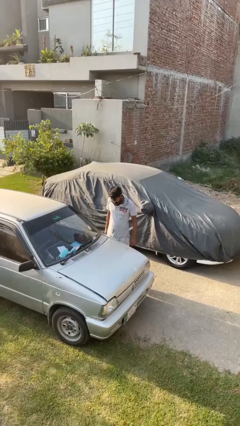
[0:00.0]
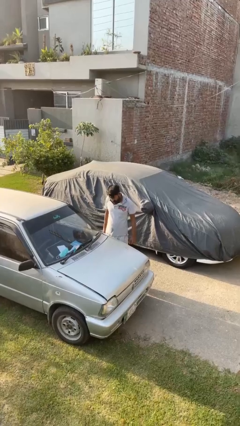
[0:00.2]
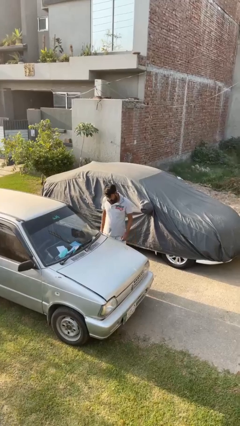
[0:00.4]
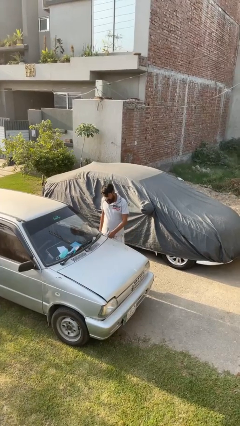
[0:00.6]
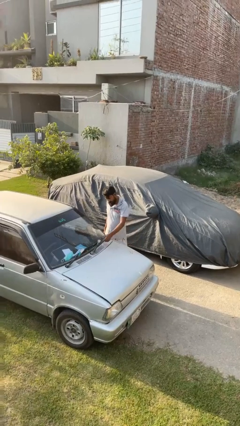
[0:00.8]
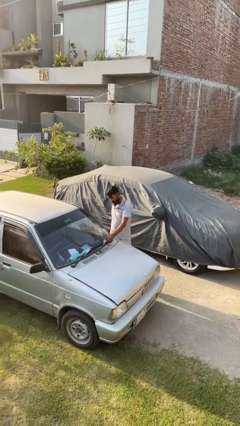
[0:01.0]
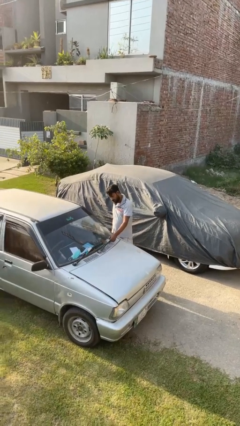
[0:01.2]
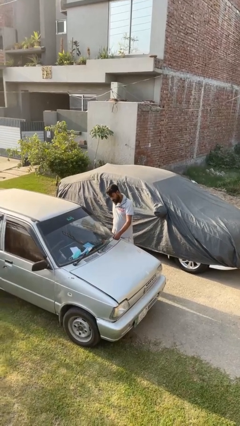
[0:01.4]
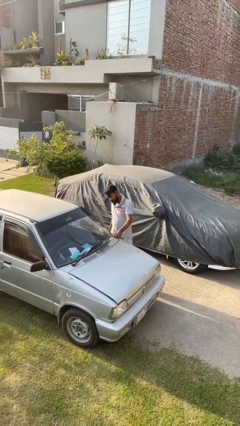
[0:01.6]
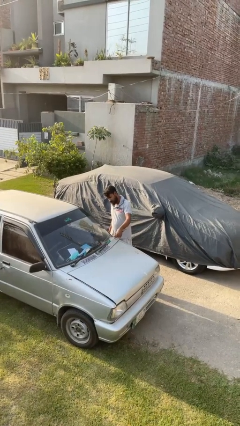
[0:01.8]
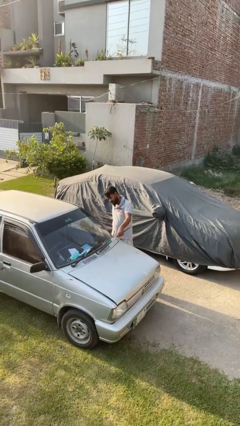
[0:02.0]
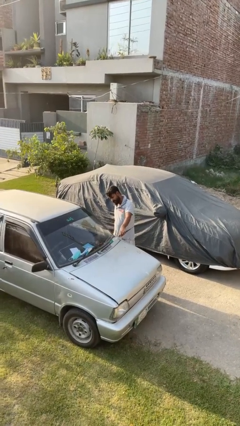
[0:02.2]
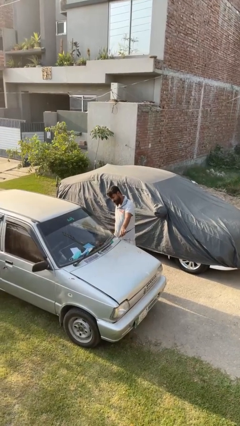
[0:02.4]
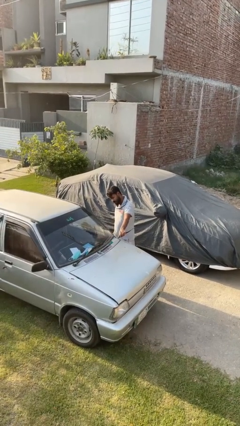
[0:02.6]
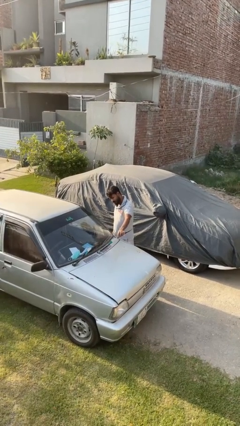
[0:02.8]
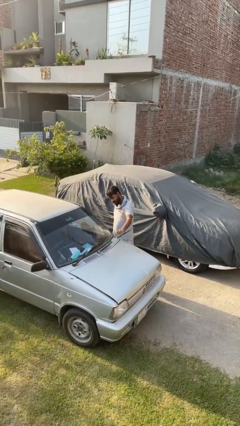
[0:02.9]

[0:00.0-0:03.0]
person flips up car wipers

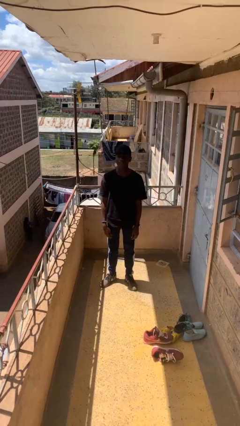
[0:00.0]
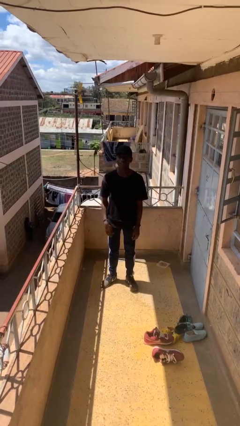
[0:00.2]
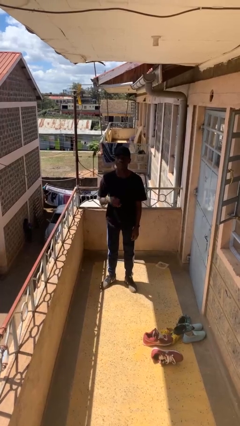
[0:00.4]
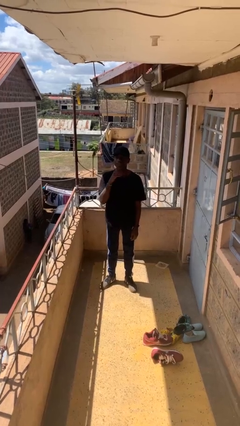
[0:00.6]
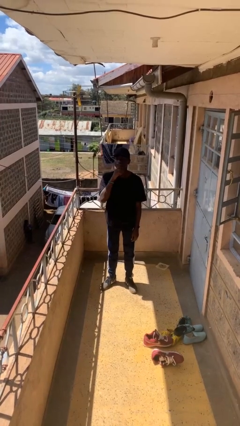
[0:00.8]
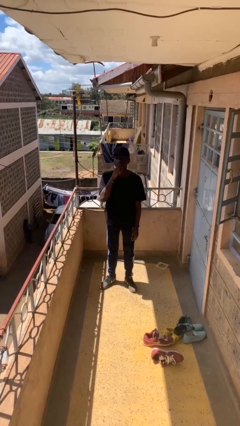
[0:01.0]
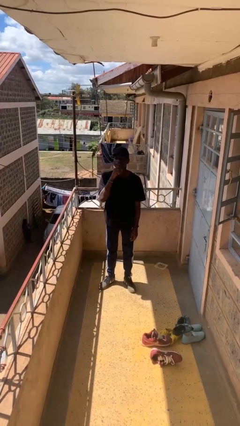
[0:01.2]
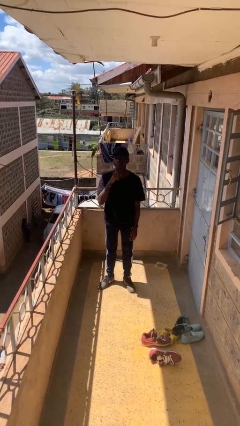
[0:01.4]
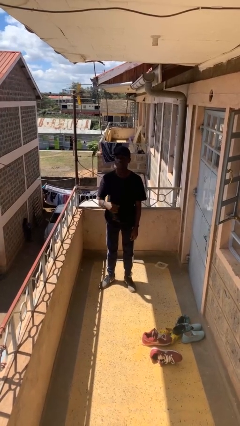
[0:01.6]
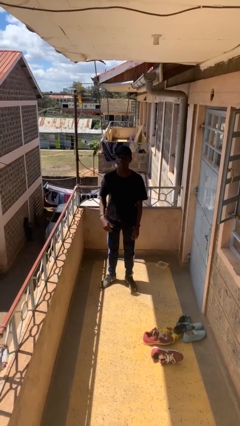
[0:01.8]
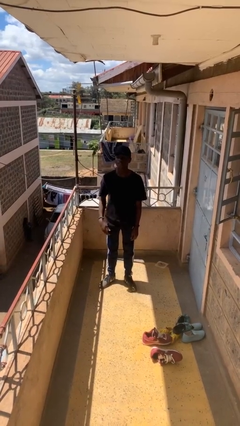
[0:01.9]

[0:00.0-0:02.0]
person strokes chin

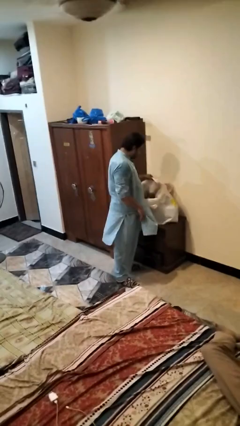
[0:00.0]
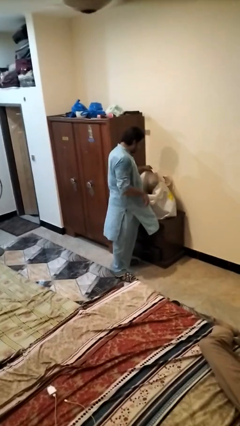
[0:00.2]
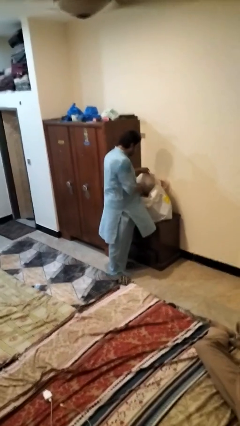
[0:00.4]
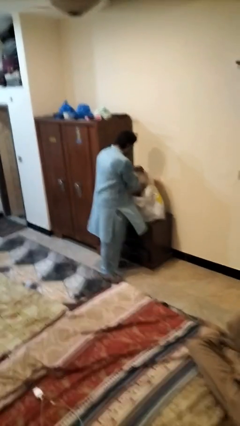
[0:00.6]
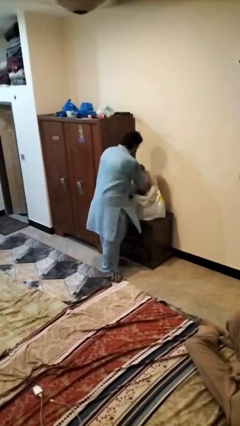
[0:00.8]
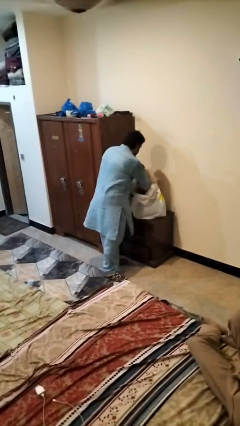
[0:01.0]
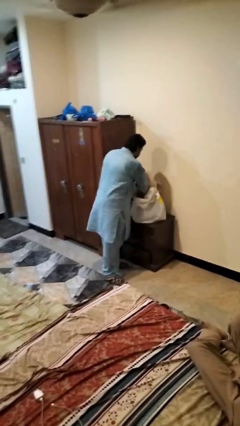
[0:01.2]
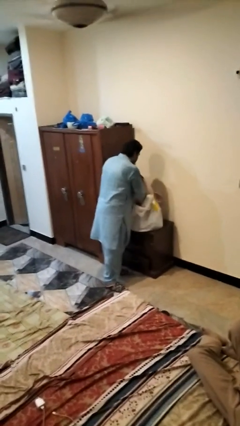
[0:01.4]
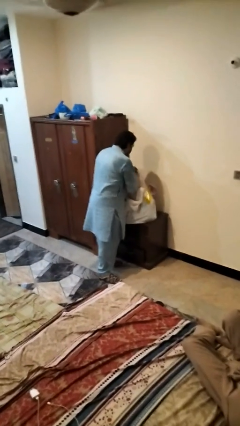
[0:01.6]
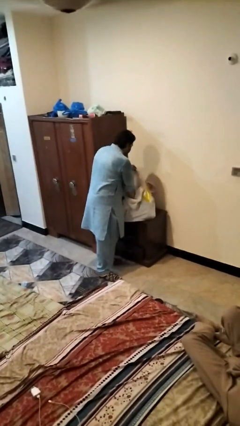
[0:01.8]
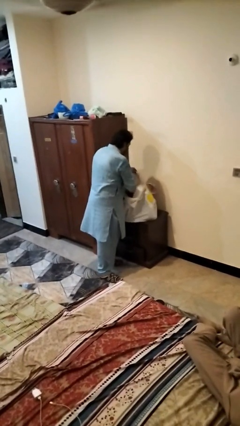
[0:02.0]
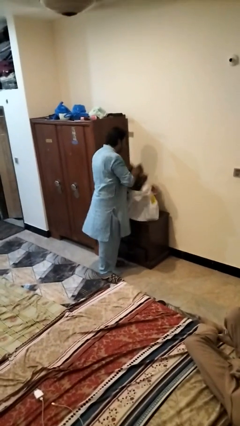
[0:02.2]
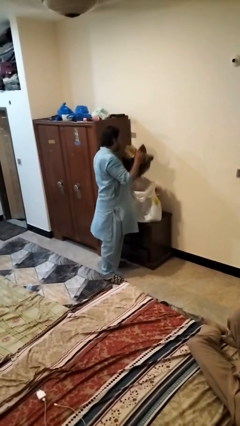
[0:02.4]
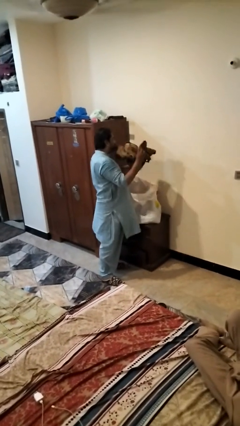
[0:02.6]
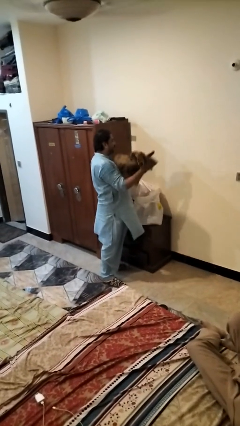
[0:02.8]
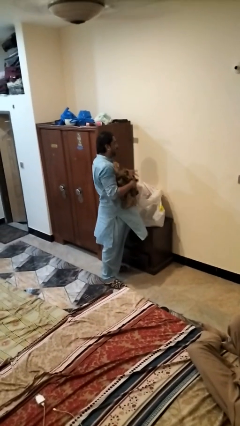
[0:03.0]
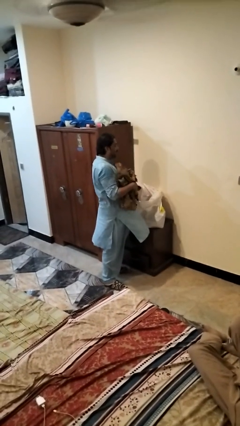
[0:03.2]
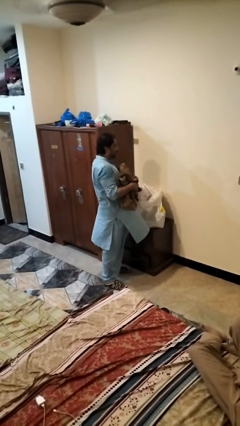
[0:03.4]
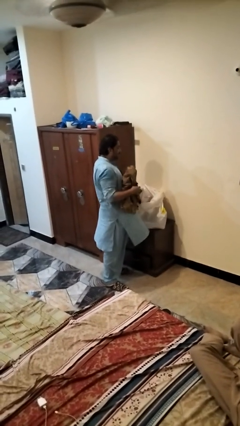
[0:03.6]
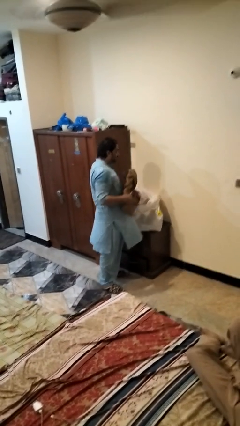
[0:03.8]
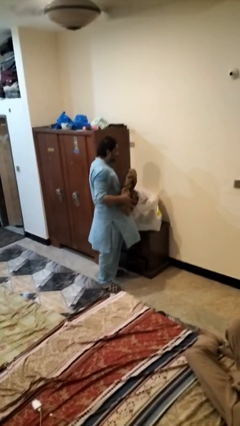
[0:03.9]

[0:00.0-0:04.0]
person takes object from bag

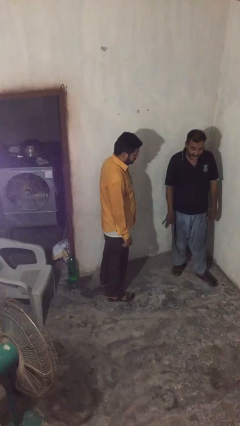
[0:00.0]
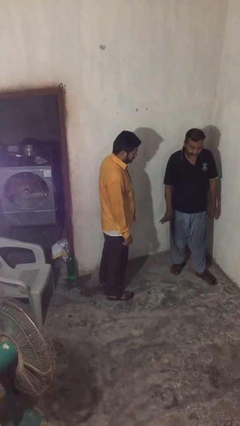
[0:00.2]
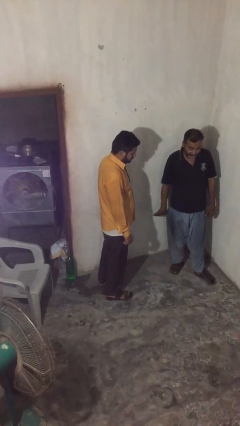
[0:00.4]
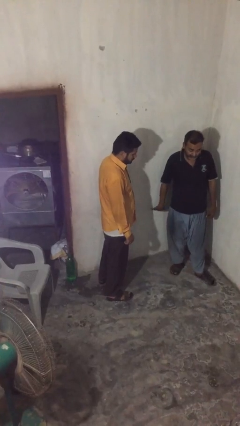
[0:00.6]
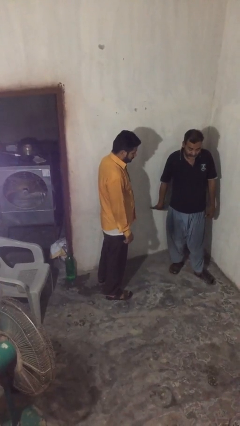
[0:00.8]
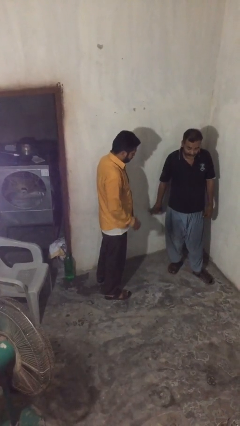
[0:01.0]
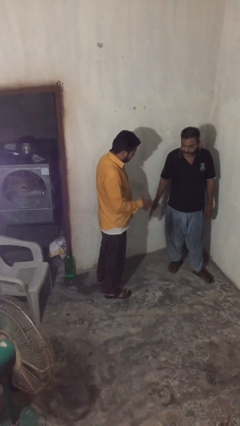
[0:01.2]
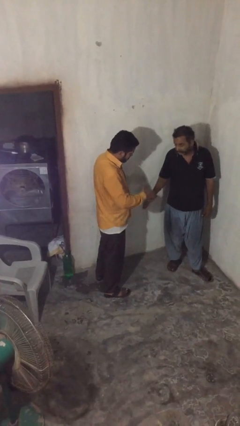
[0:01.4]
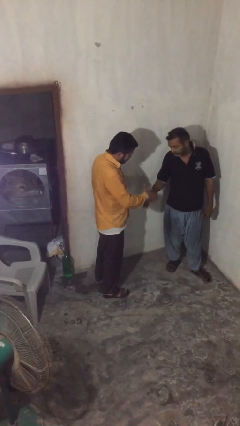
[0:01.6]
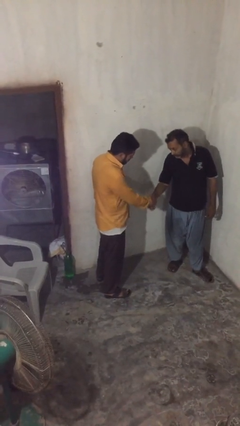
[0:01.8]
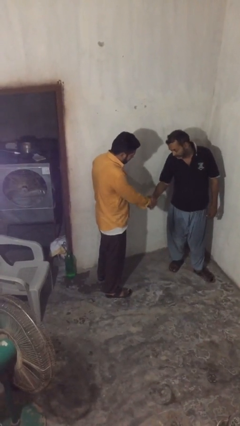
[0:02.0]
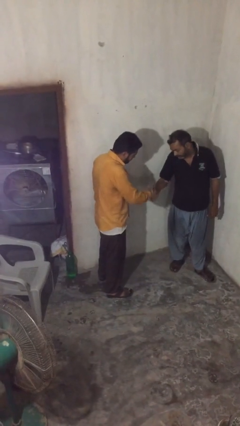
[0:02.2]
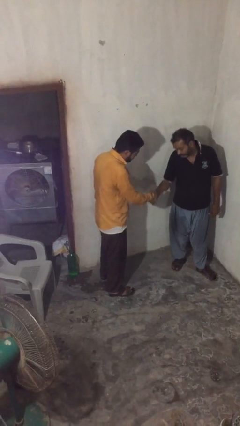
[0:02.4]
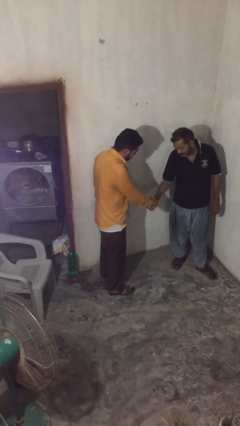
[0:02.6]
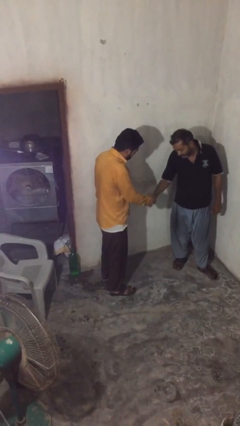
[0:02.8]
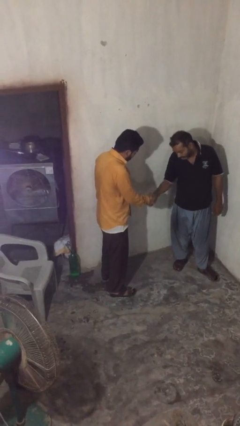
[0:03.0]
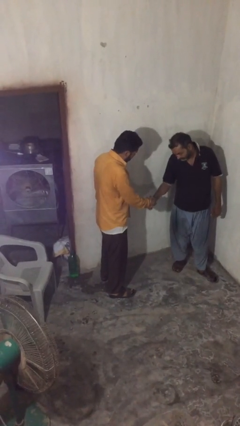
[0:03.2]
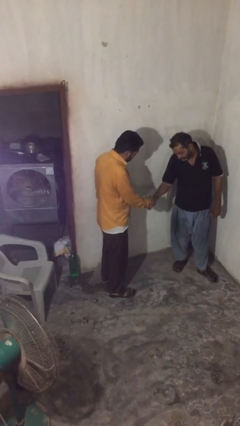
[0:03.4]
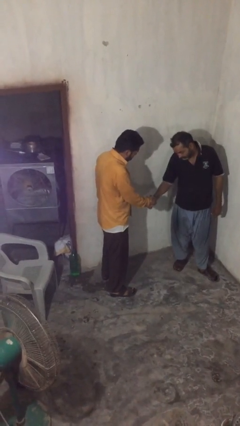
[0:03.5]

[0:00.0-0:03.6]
person shakes hand

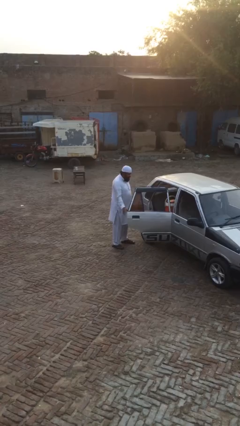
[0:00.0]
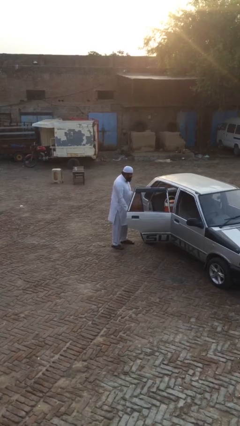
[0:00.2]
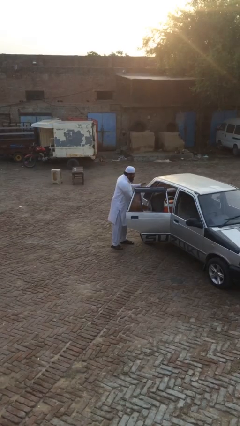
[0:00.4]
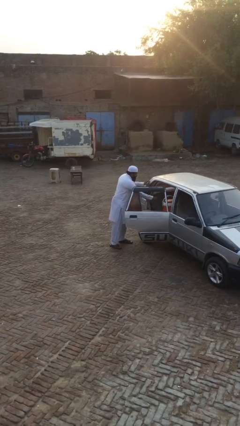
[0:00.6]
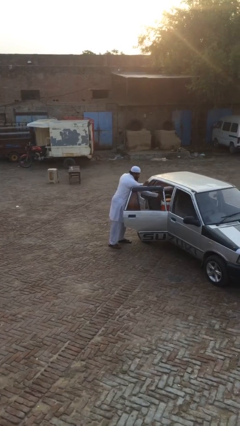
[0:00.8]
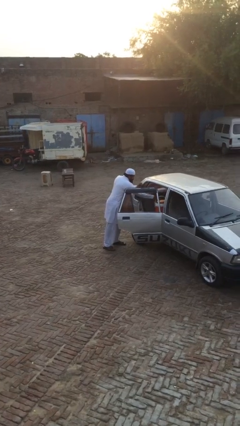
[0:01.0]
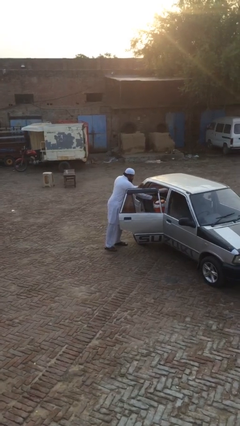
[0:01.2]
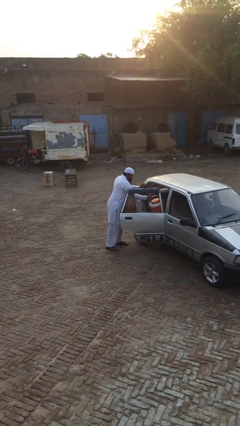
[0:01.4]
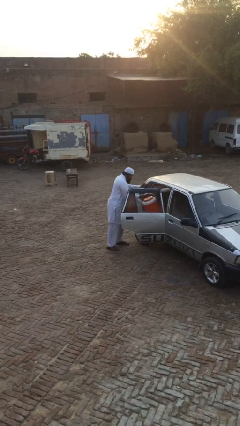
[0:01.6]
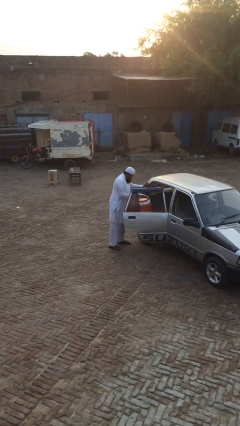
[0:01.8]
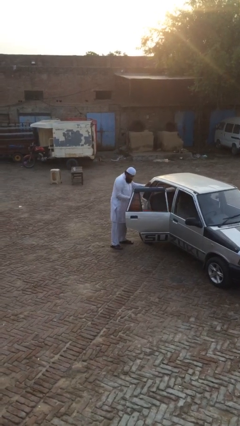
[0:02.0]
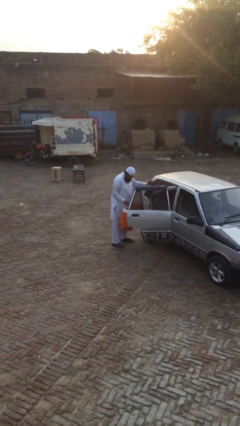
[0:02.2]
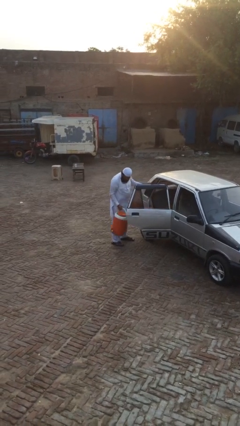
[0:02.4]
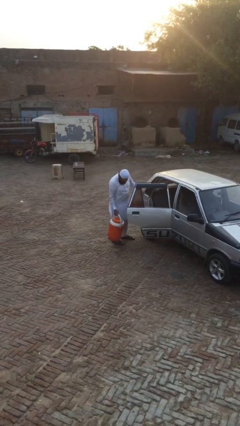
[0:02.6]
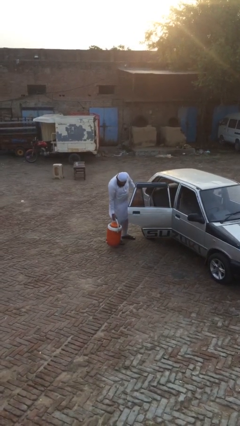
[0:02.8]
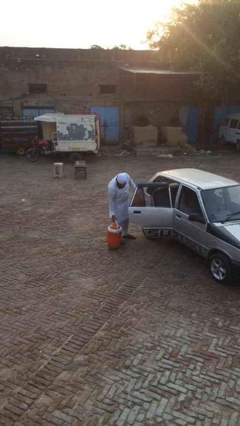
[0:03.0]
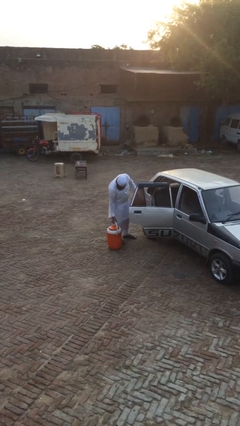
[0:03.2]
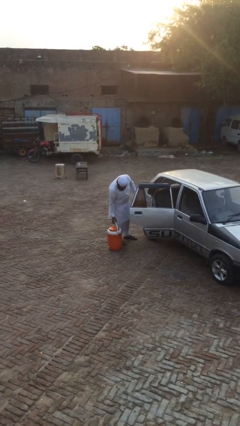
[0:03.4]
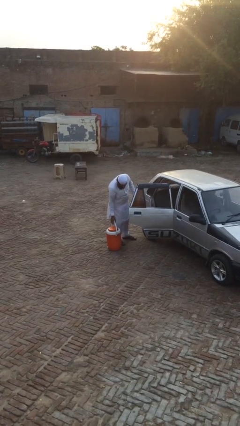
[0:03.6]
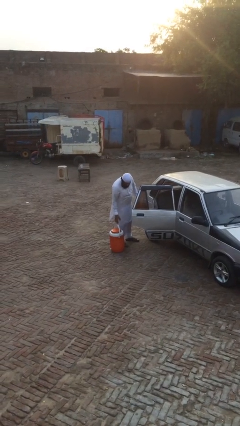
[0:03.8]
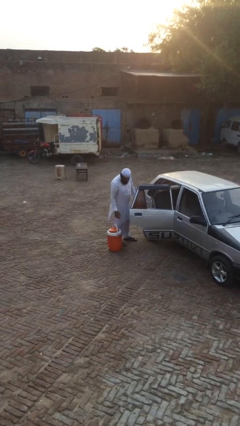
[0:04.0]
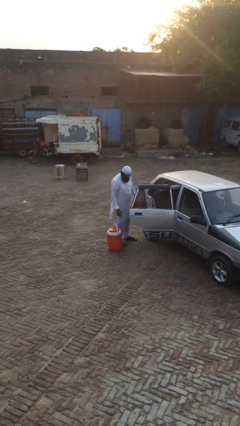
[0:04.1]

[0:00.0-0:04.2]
person unloads car

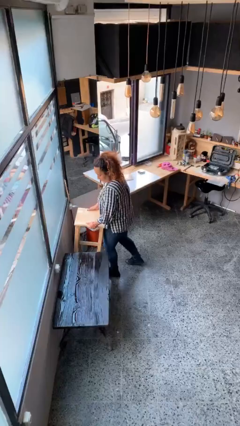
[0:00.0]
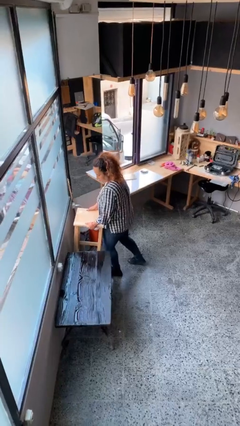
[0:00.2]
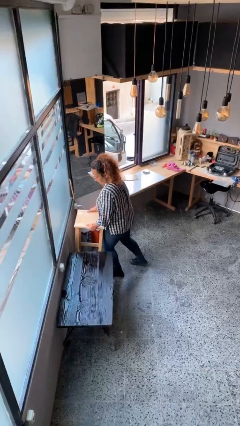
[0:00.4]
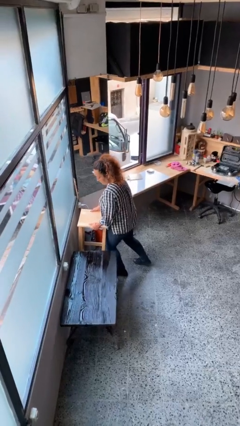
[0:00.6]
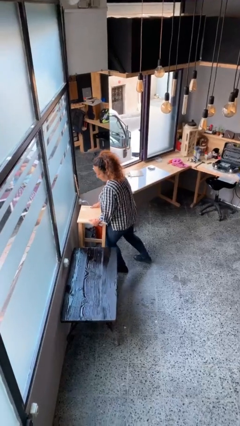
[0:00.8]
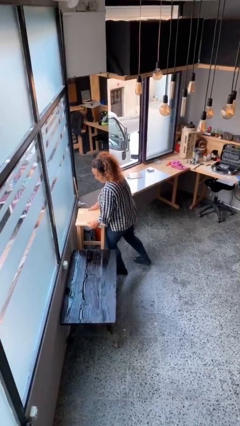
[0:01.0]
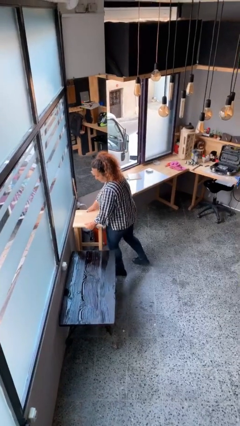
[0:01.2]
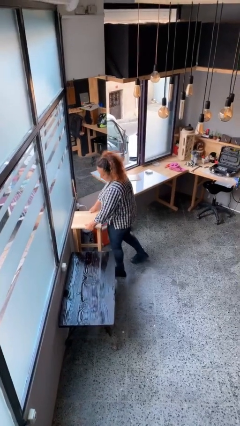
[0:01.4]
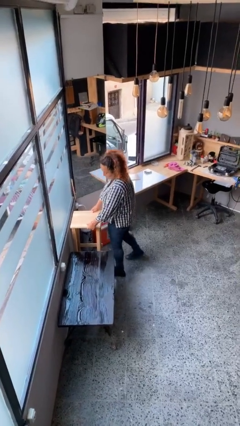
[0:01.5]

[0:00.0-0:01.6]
person puts down object on floor
